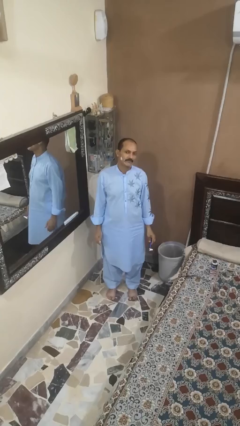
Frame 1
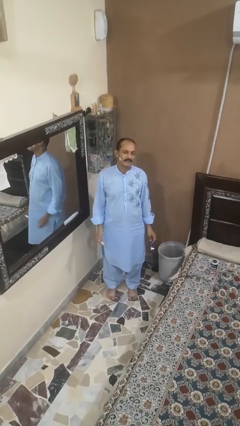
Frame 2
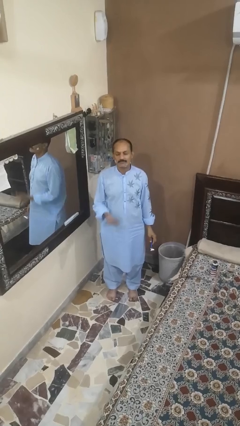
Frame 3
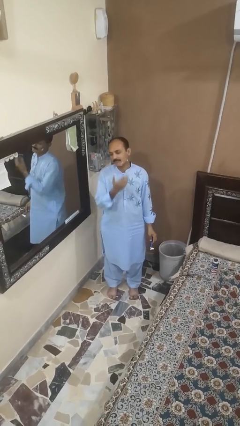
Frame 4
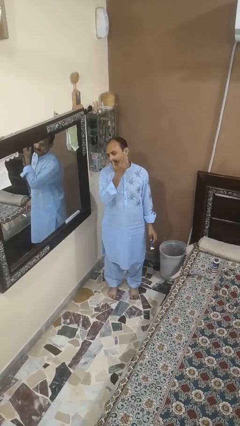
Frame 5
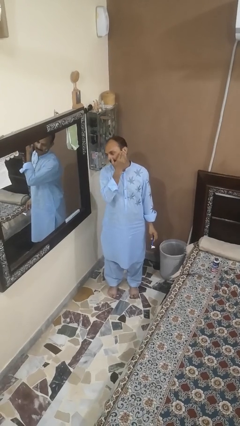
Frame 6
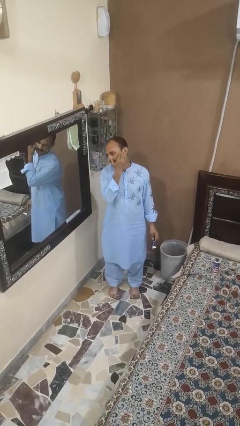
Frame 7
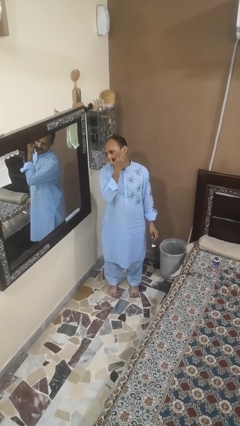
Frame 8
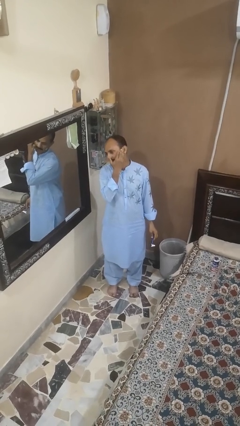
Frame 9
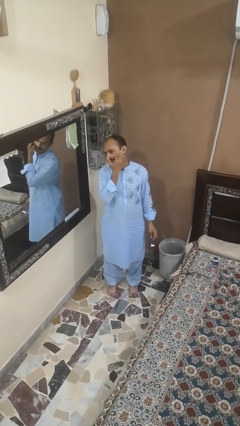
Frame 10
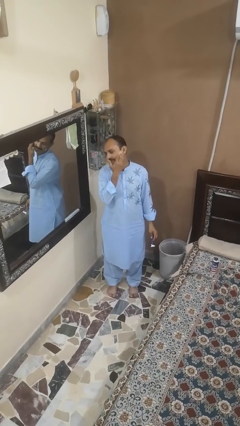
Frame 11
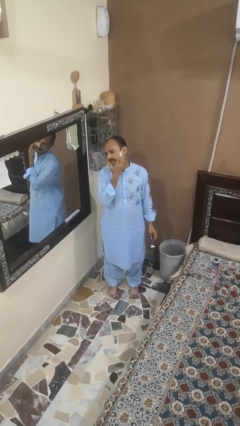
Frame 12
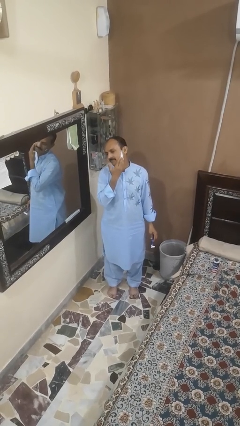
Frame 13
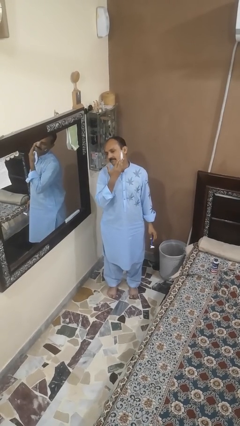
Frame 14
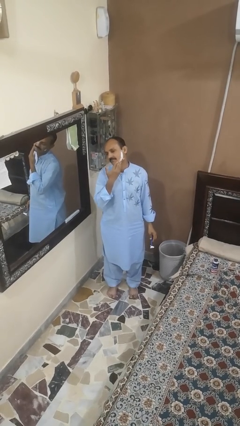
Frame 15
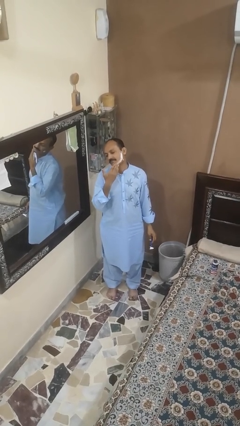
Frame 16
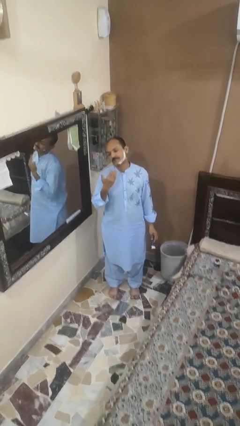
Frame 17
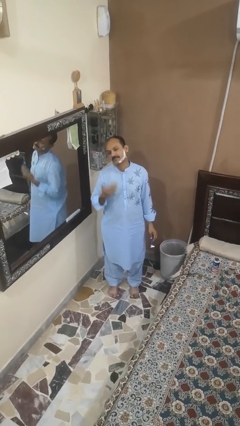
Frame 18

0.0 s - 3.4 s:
person applies shaving cream

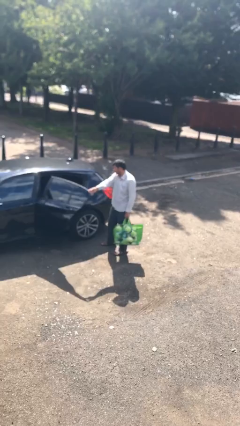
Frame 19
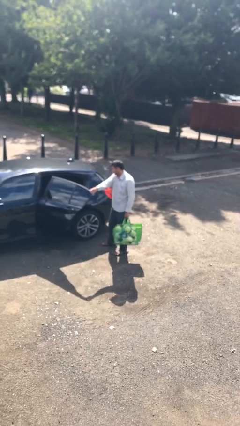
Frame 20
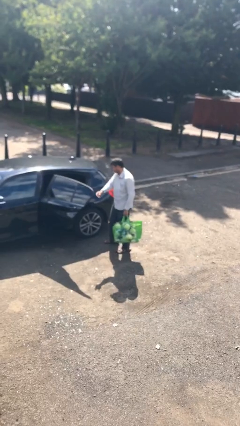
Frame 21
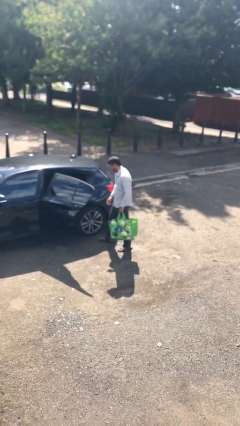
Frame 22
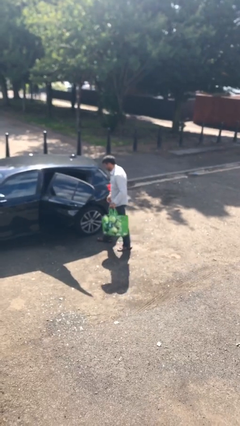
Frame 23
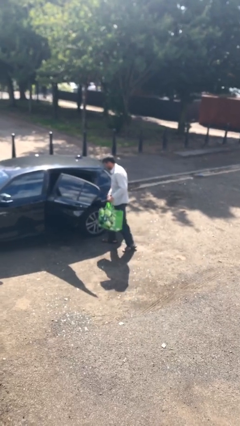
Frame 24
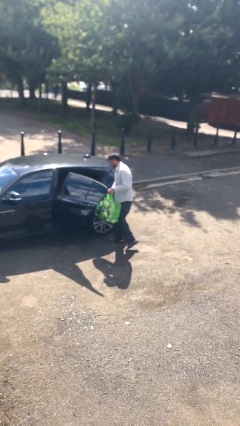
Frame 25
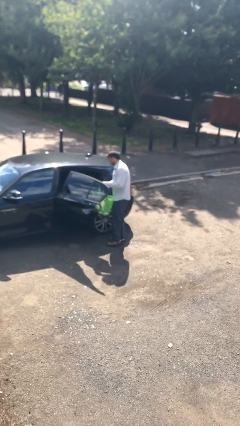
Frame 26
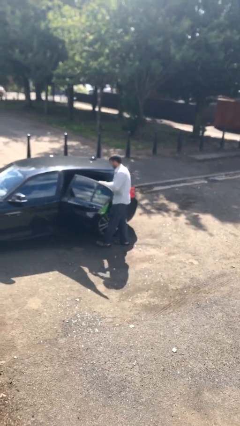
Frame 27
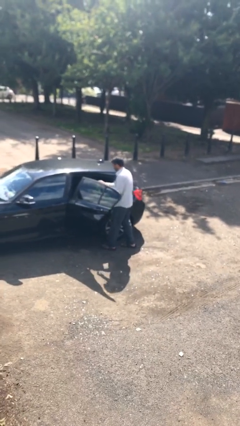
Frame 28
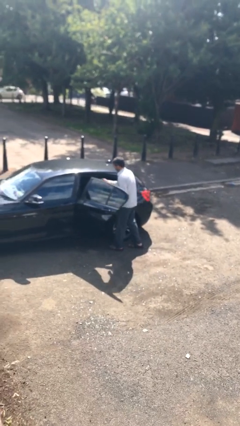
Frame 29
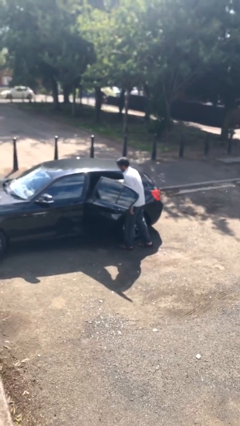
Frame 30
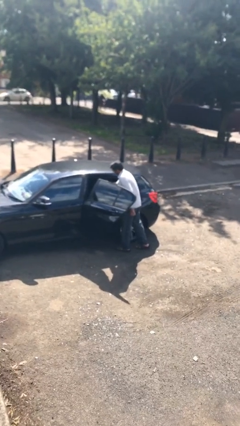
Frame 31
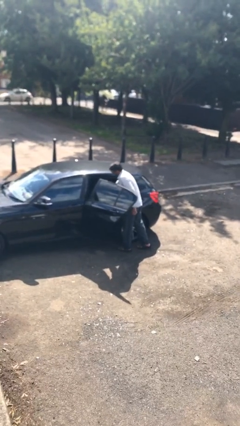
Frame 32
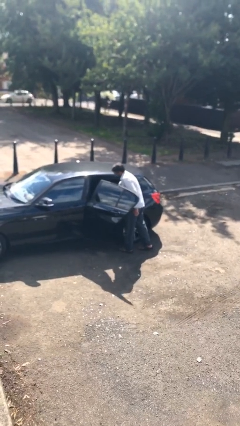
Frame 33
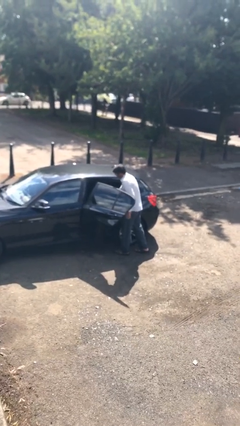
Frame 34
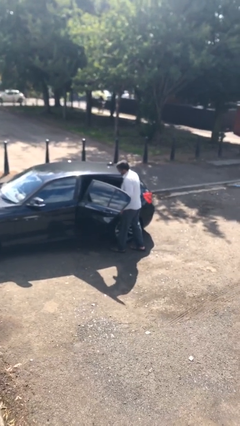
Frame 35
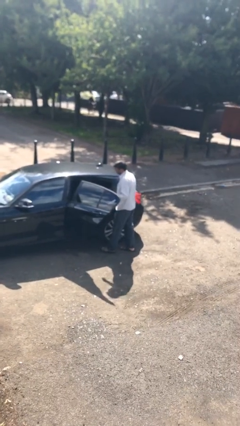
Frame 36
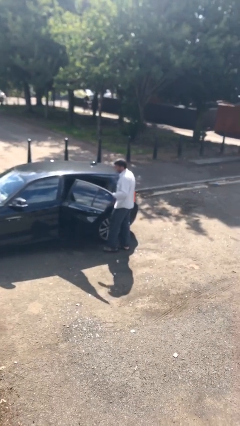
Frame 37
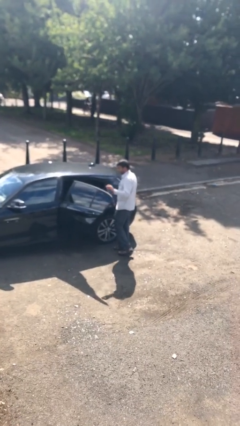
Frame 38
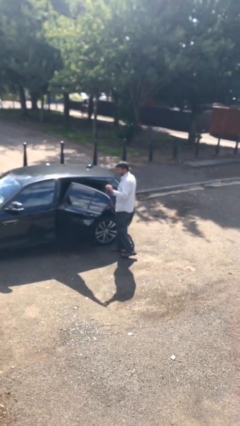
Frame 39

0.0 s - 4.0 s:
person loads car

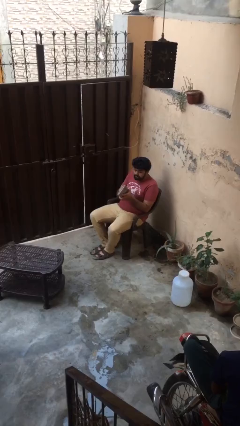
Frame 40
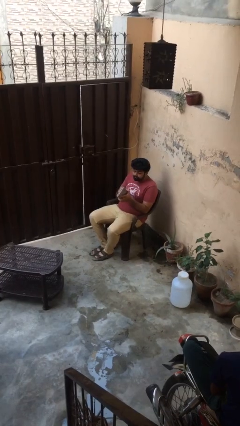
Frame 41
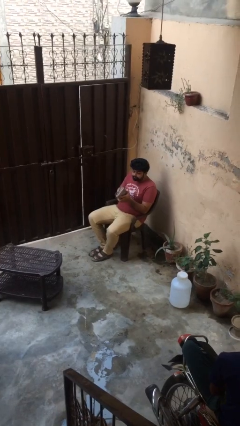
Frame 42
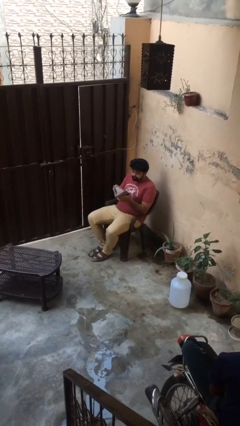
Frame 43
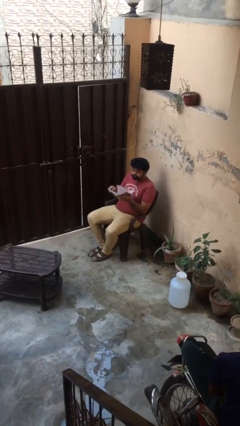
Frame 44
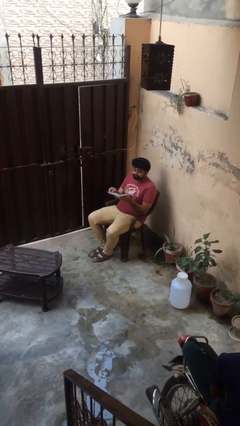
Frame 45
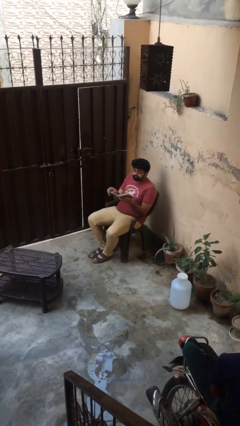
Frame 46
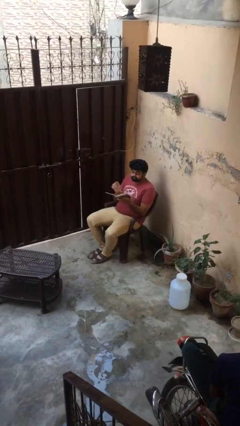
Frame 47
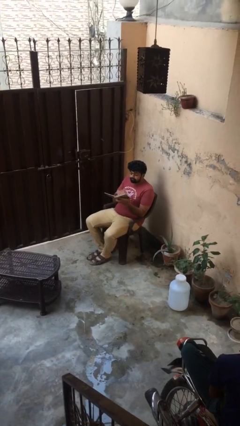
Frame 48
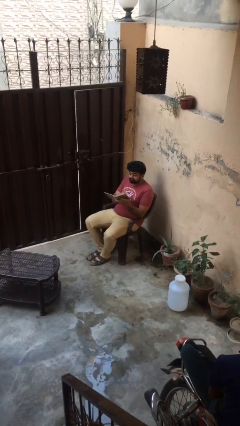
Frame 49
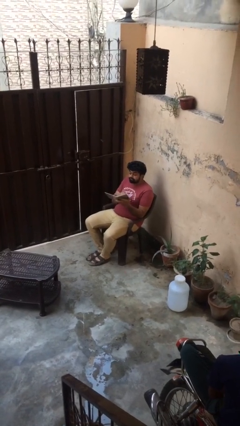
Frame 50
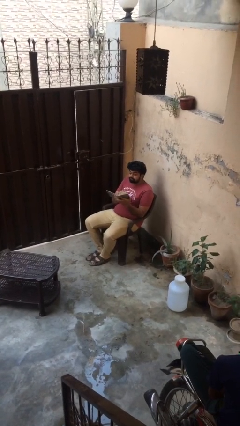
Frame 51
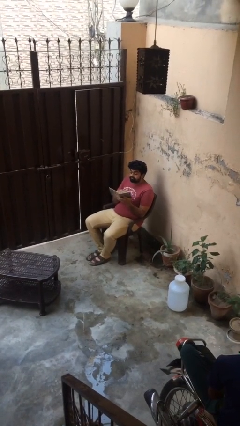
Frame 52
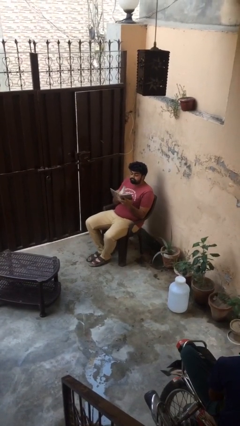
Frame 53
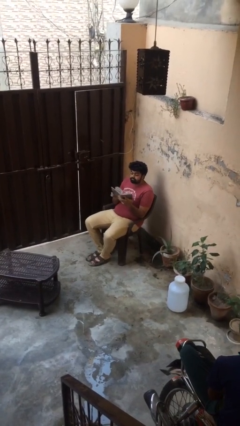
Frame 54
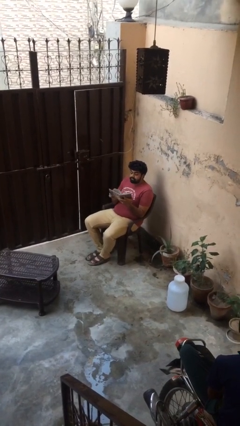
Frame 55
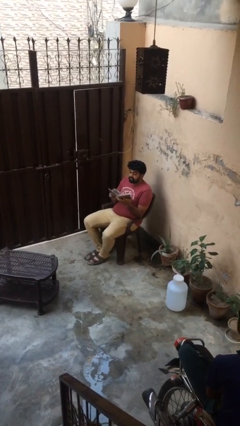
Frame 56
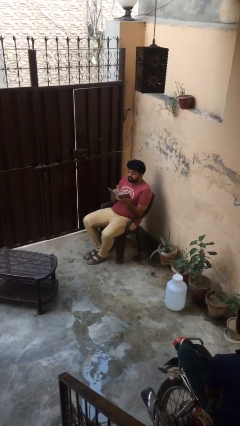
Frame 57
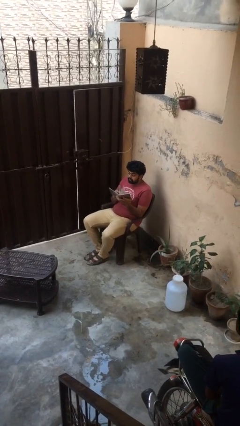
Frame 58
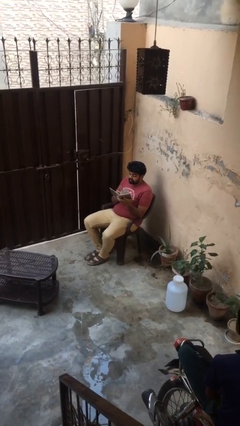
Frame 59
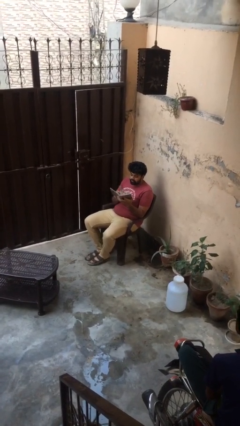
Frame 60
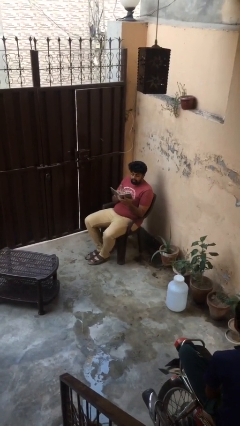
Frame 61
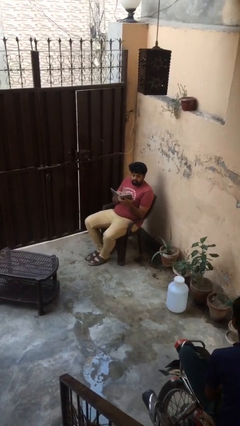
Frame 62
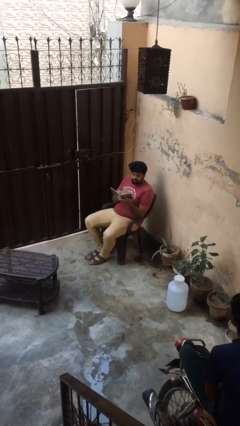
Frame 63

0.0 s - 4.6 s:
person reads document

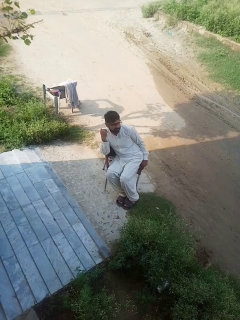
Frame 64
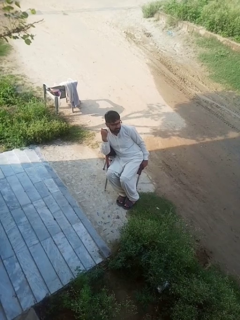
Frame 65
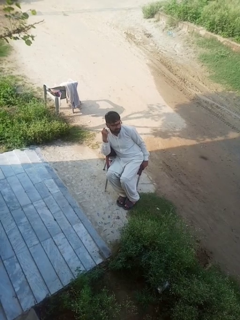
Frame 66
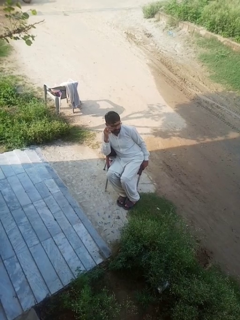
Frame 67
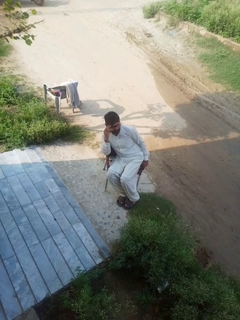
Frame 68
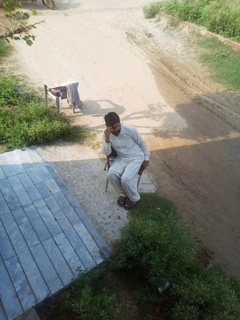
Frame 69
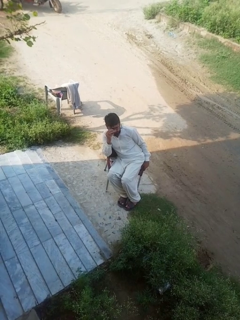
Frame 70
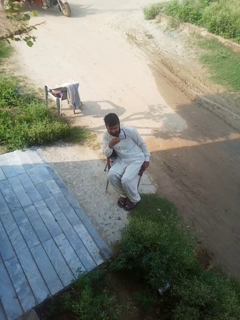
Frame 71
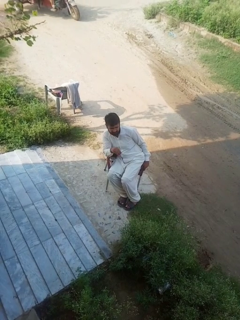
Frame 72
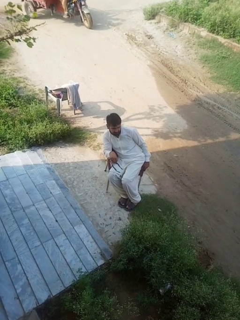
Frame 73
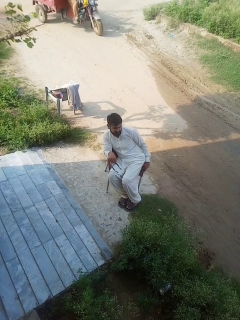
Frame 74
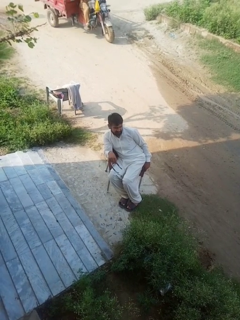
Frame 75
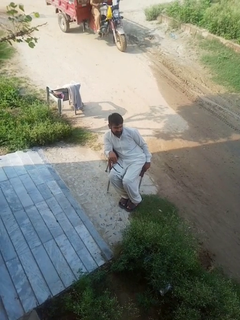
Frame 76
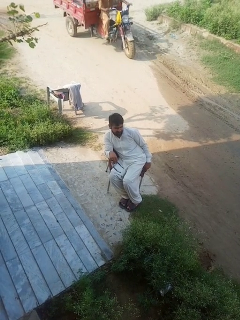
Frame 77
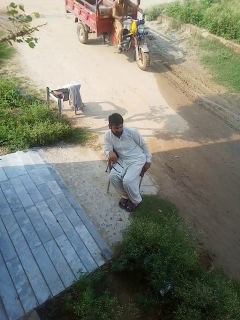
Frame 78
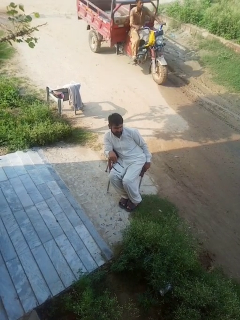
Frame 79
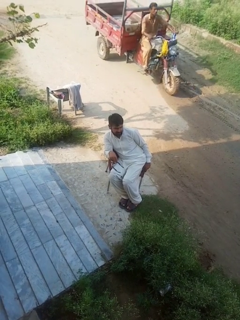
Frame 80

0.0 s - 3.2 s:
person takes off glasses

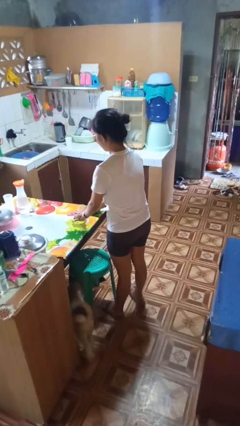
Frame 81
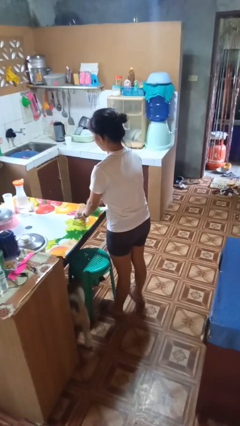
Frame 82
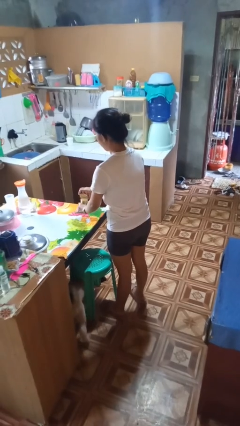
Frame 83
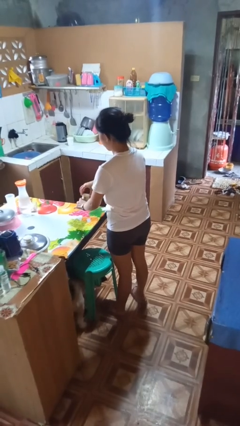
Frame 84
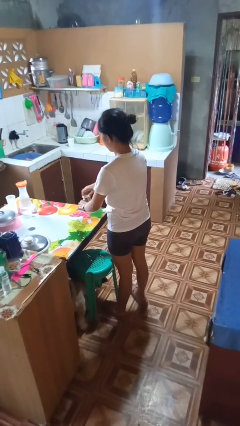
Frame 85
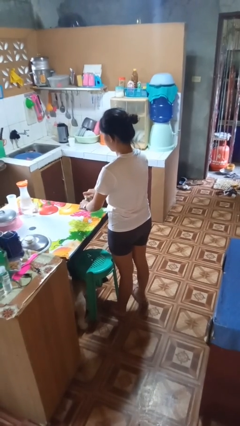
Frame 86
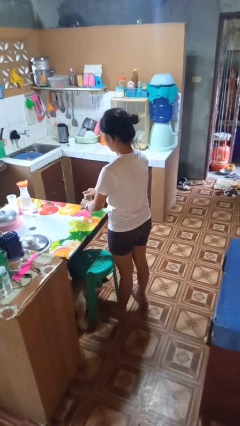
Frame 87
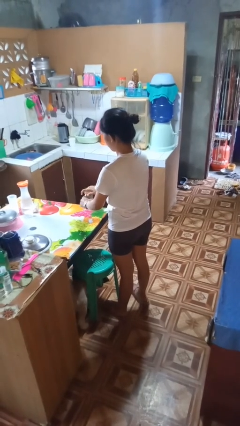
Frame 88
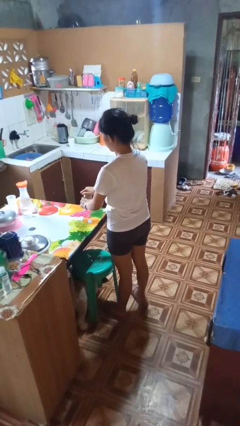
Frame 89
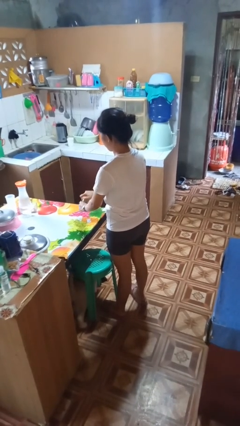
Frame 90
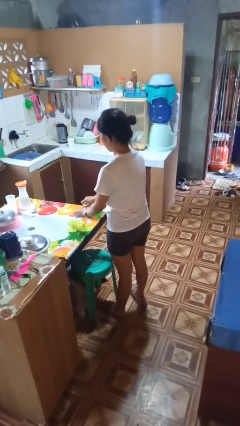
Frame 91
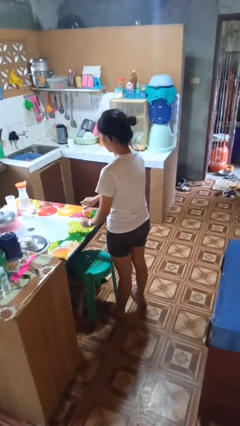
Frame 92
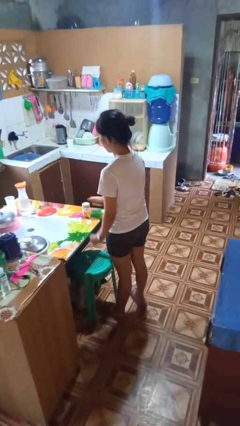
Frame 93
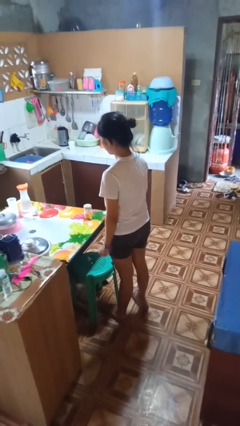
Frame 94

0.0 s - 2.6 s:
person closes jar

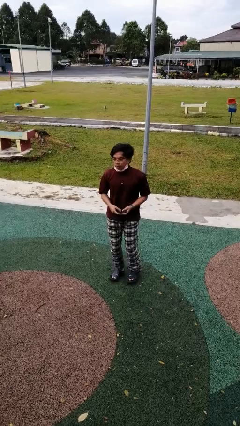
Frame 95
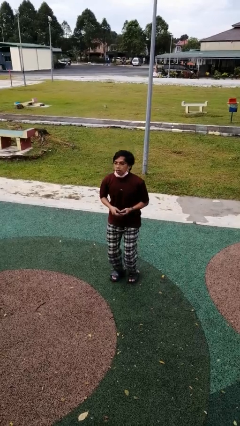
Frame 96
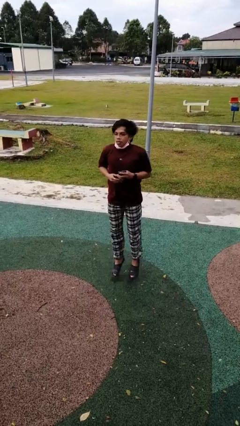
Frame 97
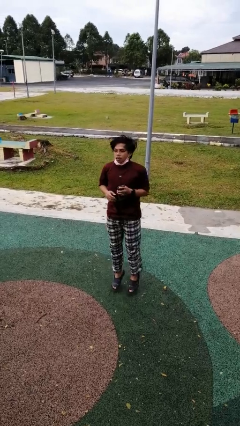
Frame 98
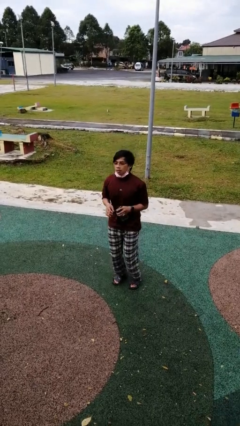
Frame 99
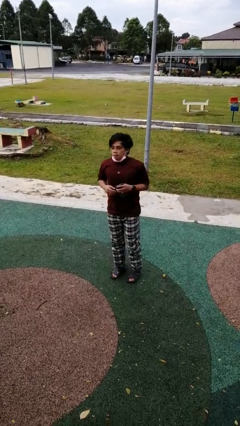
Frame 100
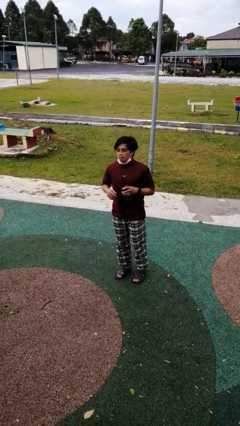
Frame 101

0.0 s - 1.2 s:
person jumps
